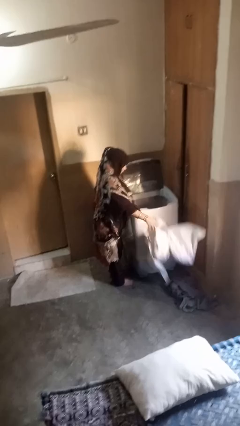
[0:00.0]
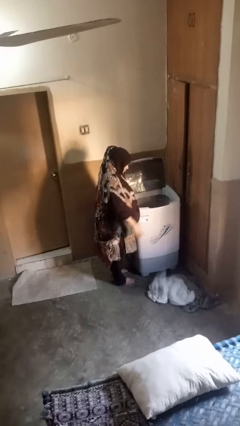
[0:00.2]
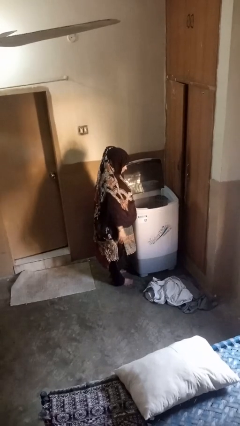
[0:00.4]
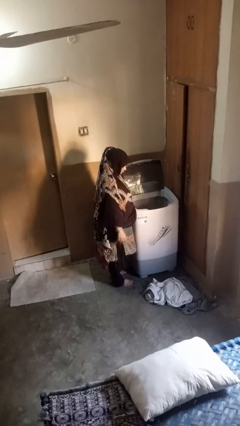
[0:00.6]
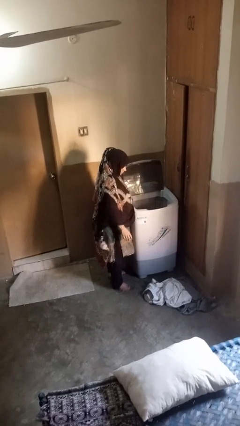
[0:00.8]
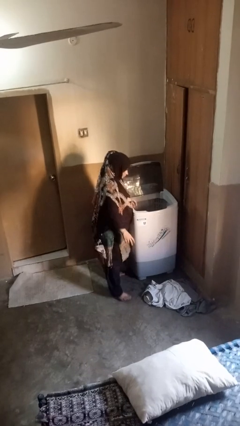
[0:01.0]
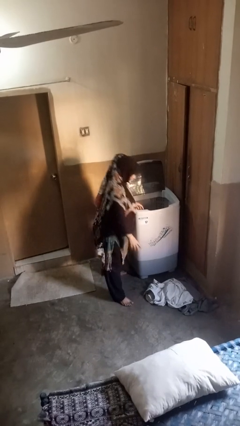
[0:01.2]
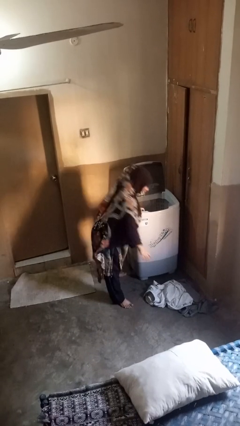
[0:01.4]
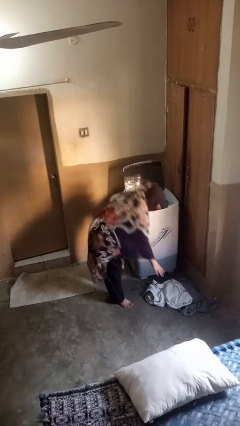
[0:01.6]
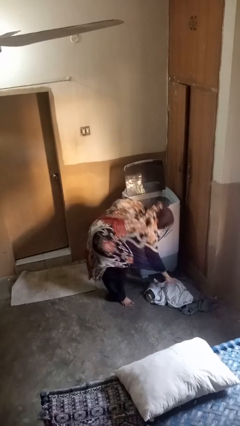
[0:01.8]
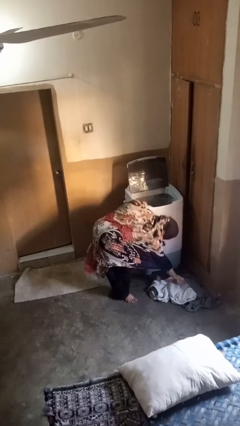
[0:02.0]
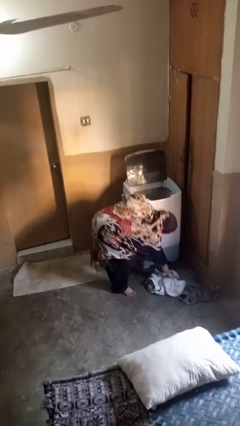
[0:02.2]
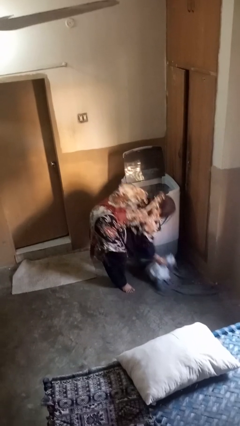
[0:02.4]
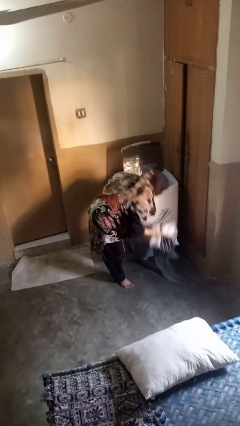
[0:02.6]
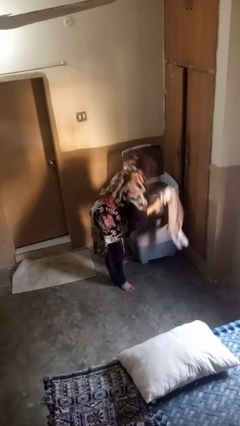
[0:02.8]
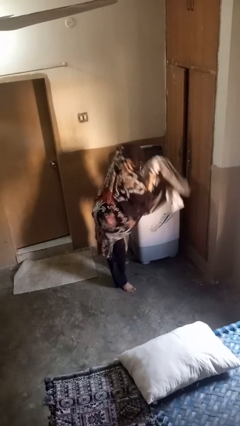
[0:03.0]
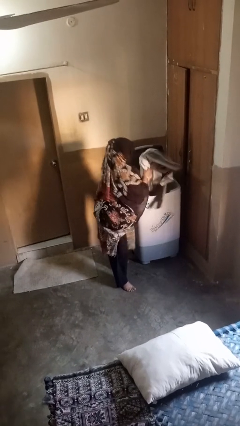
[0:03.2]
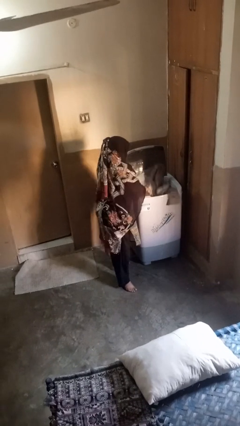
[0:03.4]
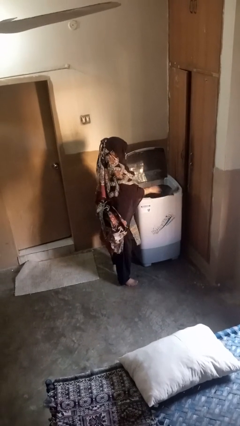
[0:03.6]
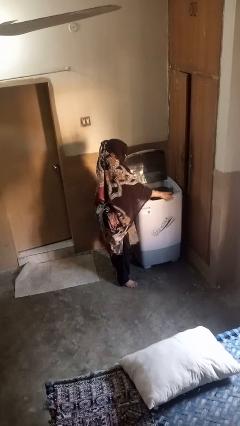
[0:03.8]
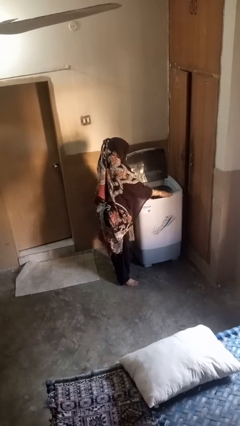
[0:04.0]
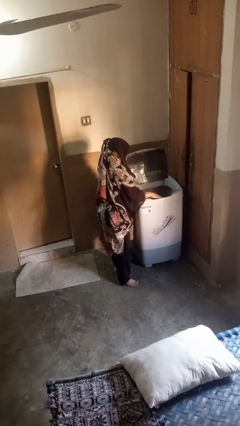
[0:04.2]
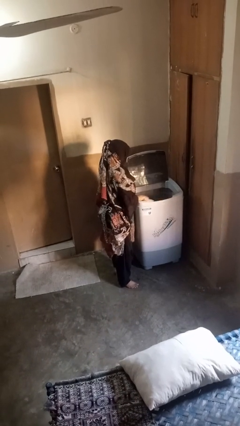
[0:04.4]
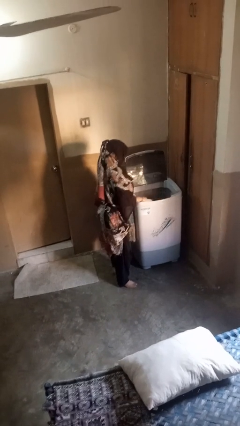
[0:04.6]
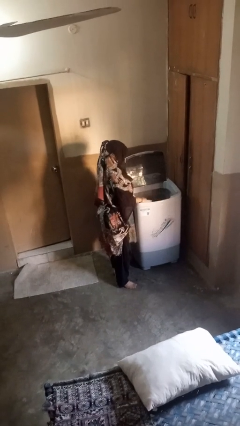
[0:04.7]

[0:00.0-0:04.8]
person loads clotheswasher

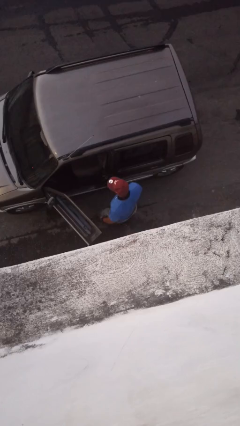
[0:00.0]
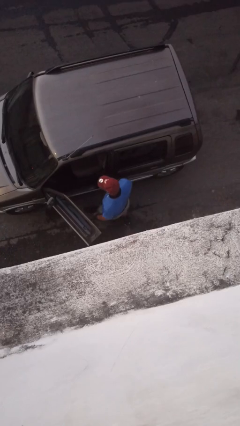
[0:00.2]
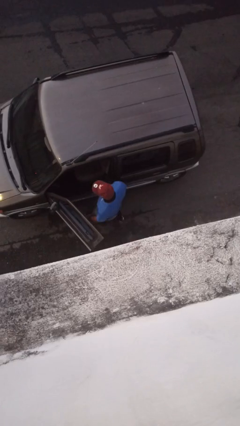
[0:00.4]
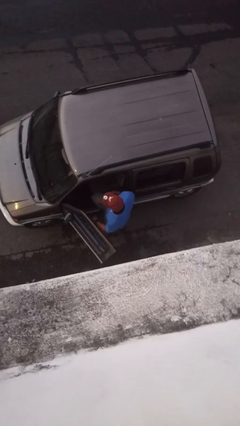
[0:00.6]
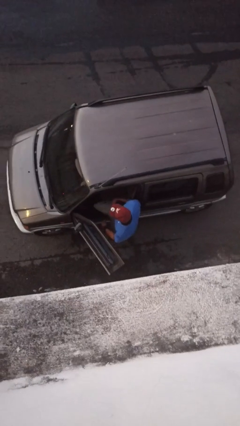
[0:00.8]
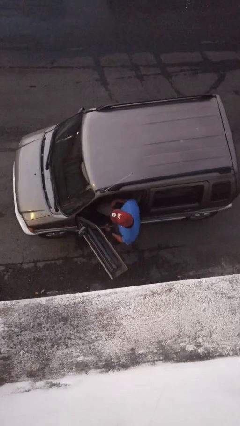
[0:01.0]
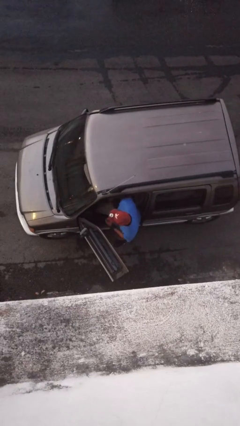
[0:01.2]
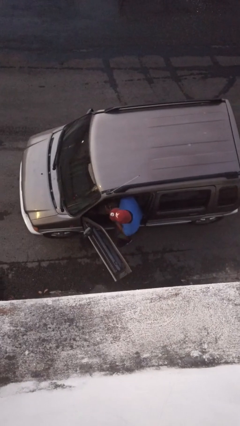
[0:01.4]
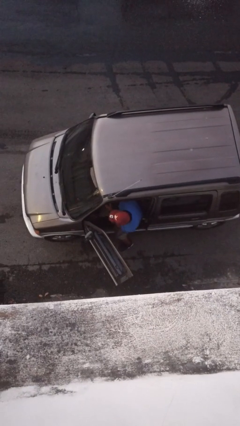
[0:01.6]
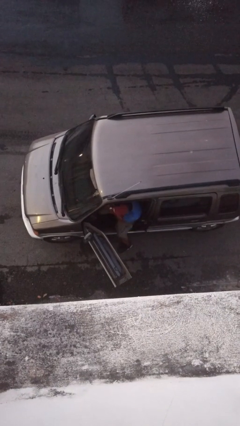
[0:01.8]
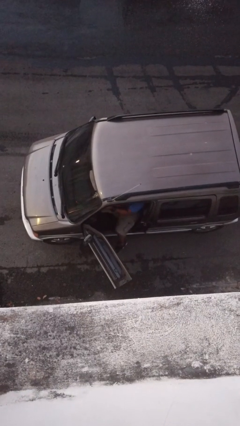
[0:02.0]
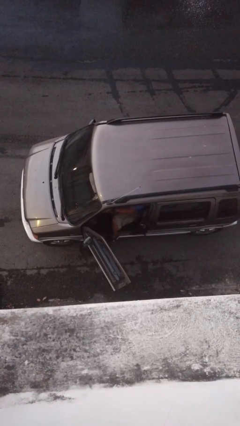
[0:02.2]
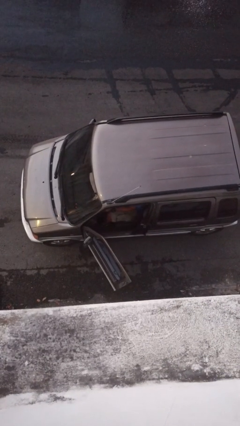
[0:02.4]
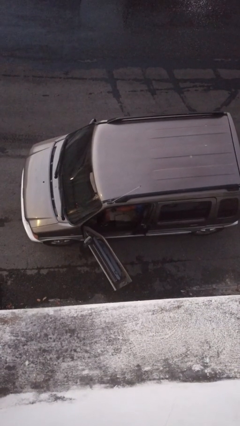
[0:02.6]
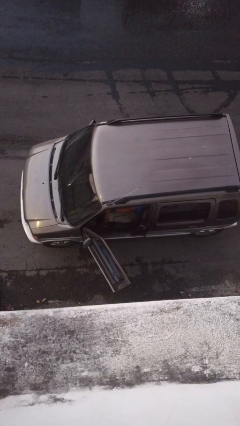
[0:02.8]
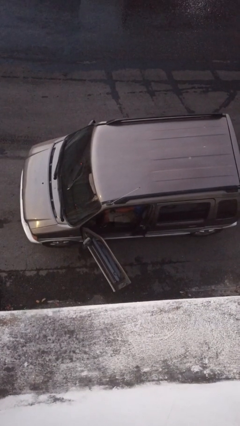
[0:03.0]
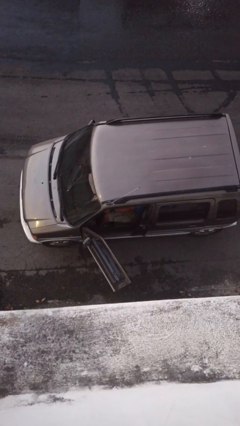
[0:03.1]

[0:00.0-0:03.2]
person enters car

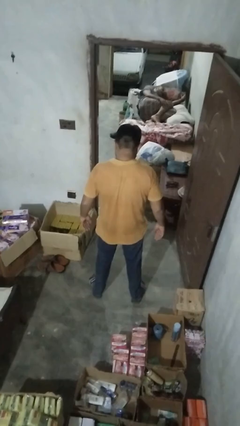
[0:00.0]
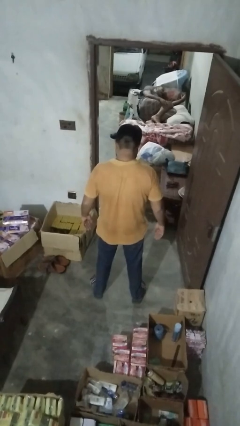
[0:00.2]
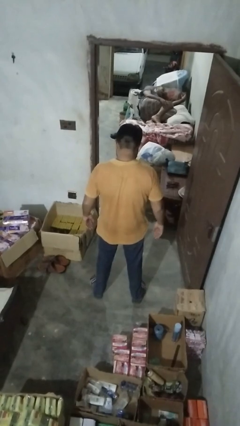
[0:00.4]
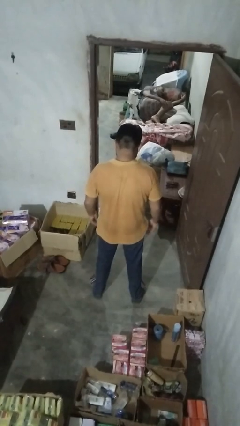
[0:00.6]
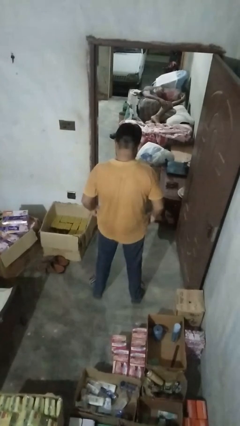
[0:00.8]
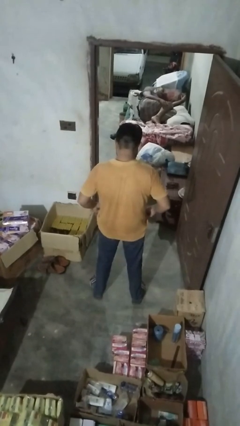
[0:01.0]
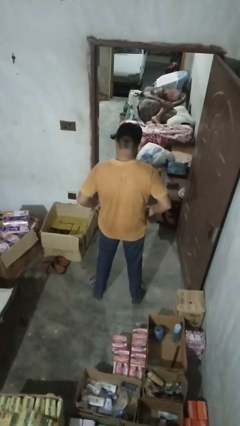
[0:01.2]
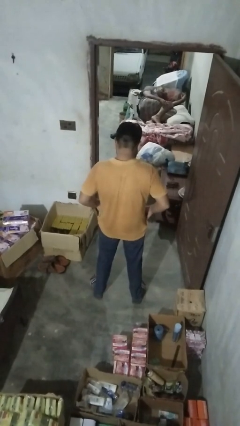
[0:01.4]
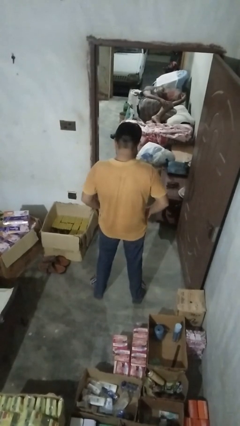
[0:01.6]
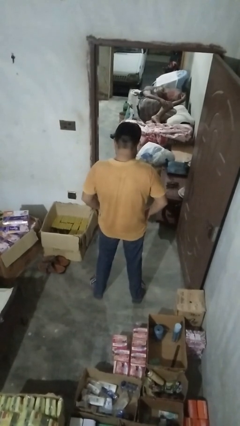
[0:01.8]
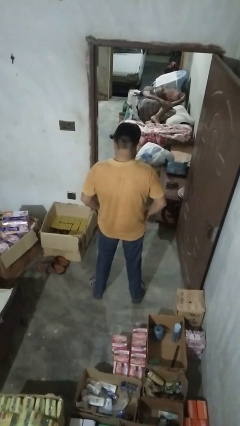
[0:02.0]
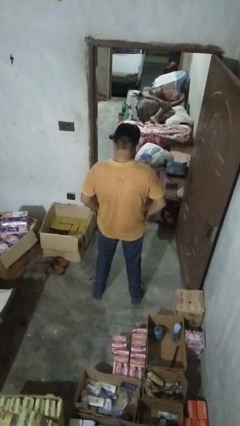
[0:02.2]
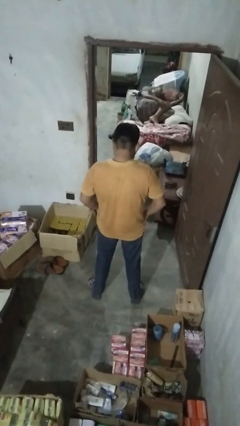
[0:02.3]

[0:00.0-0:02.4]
person puts hands in back pockets

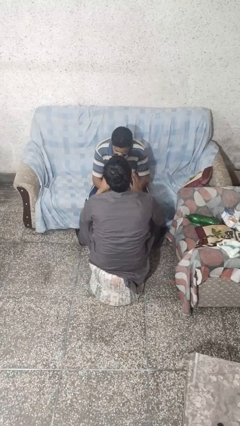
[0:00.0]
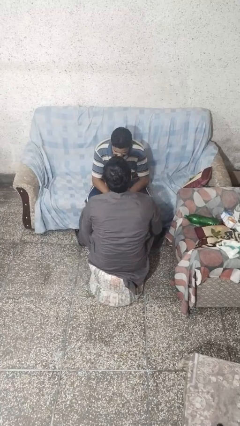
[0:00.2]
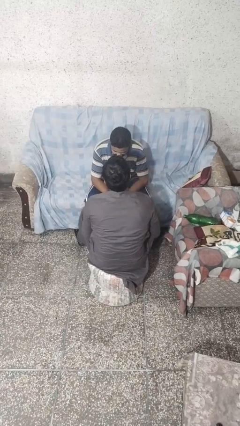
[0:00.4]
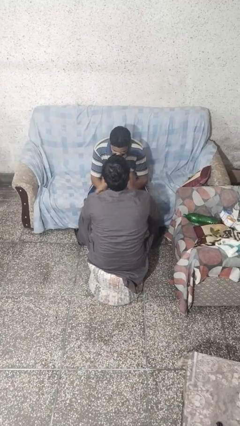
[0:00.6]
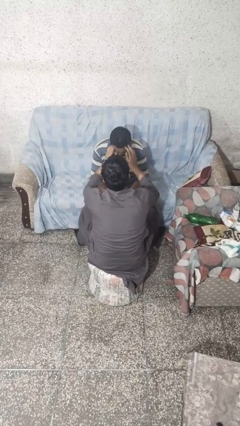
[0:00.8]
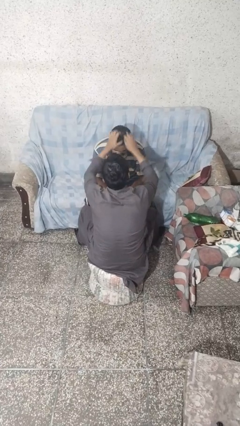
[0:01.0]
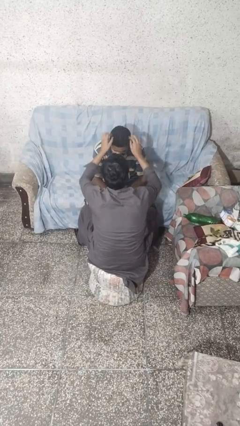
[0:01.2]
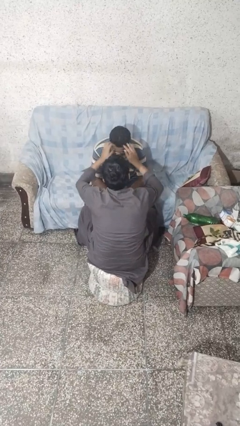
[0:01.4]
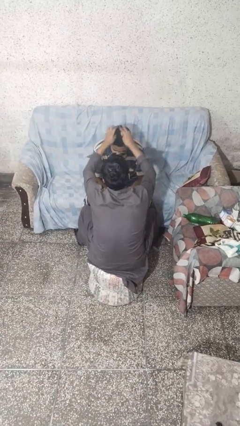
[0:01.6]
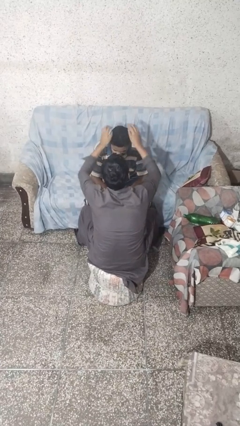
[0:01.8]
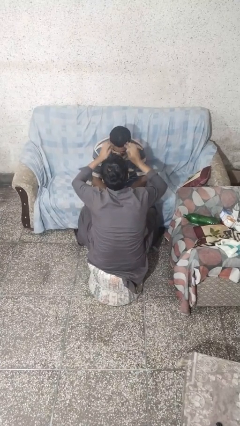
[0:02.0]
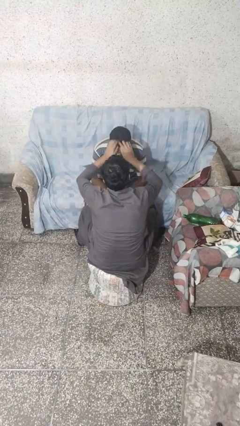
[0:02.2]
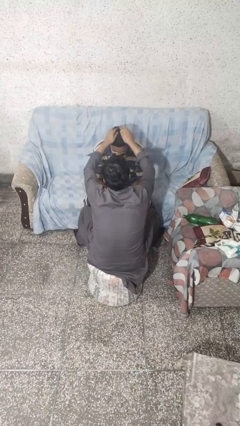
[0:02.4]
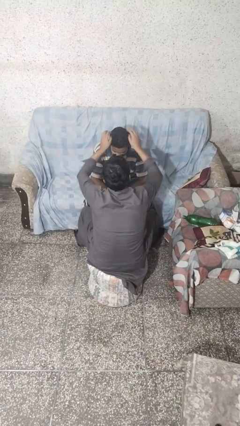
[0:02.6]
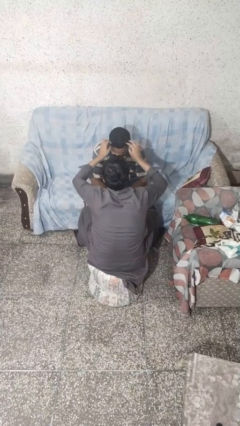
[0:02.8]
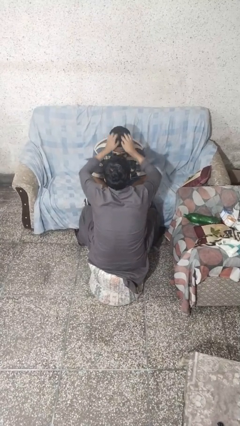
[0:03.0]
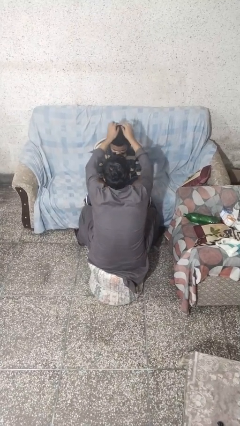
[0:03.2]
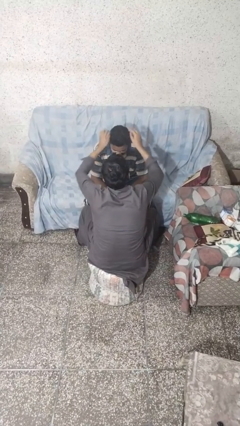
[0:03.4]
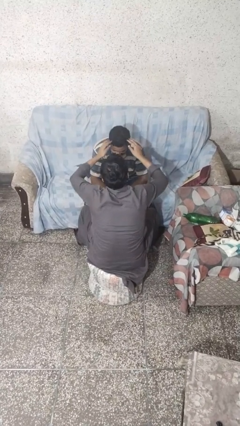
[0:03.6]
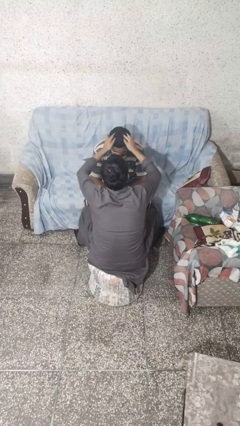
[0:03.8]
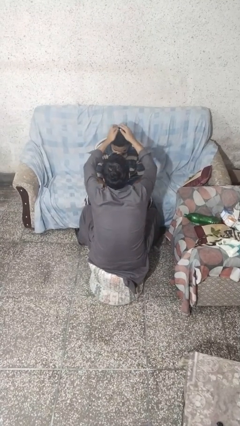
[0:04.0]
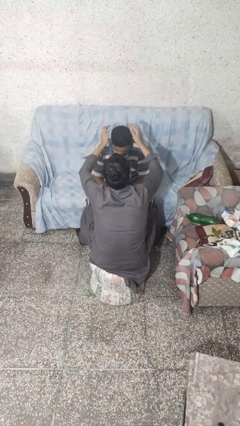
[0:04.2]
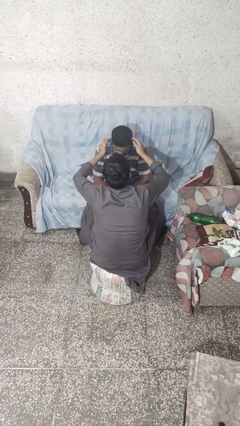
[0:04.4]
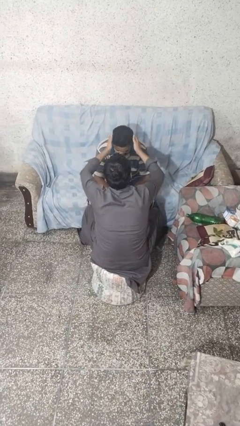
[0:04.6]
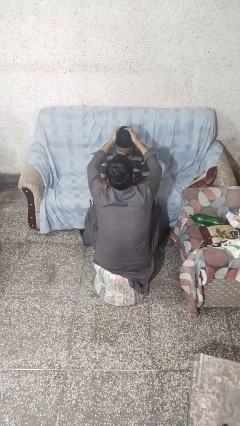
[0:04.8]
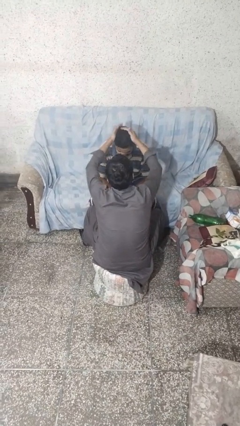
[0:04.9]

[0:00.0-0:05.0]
person braids hair of person

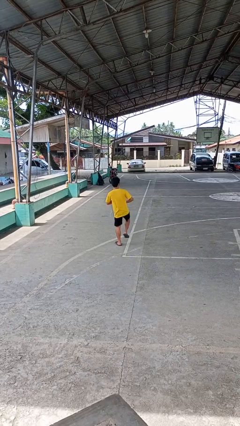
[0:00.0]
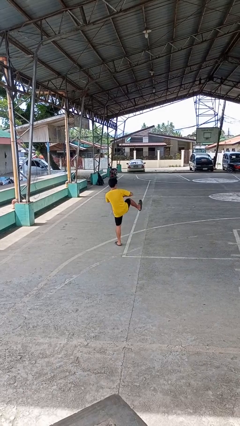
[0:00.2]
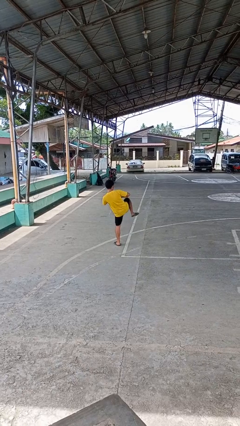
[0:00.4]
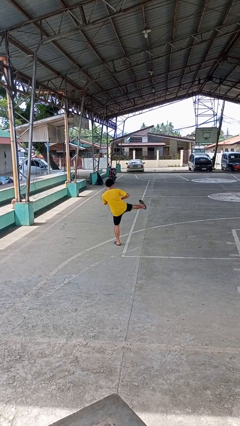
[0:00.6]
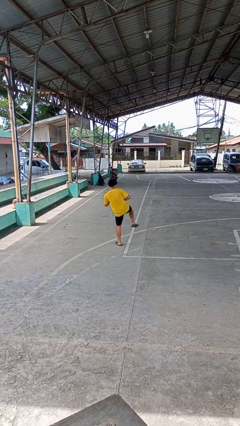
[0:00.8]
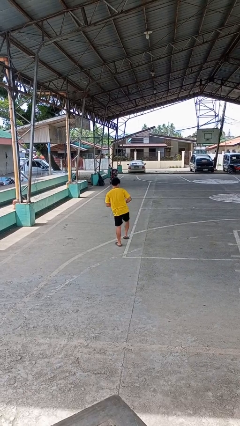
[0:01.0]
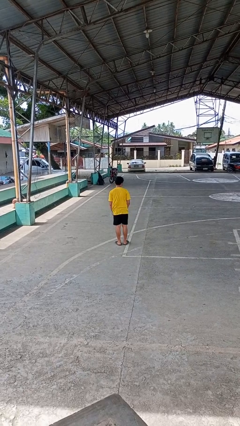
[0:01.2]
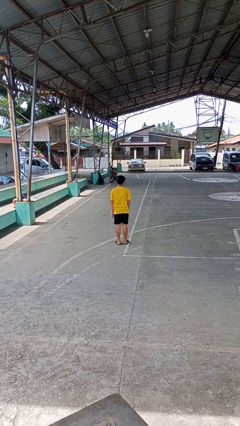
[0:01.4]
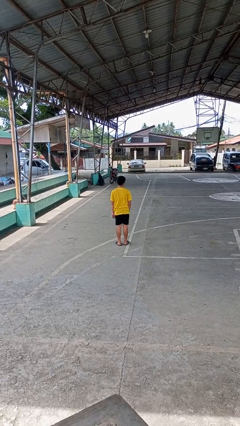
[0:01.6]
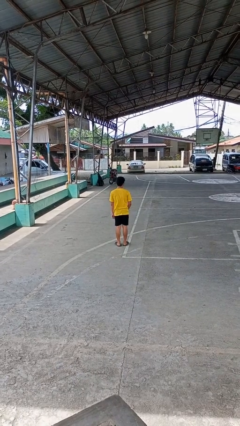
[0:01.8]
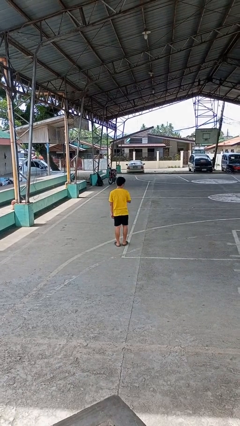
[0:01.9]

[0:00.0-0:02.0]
person karate kicks

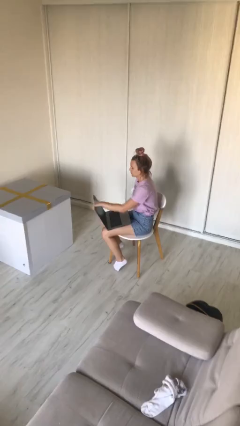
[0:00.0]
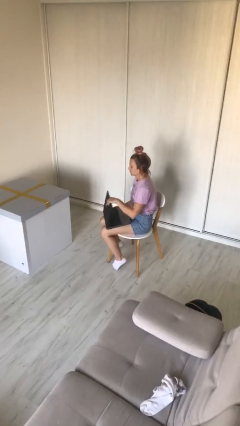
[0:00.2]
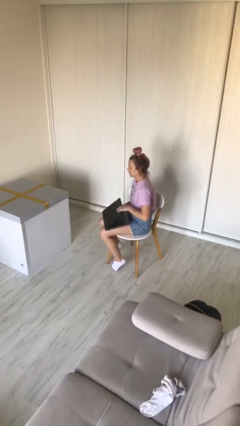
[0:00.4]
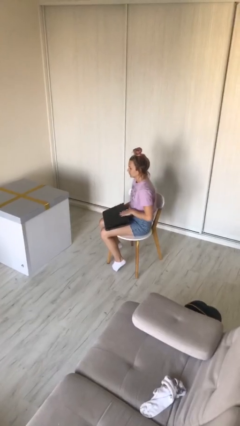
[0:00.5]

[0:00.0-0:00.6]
person closes laptop
